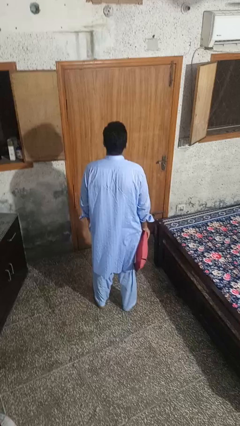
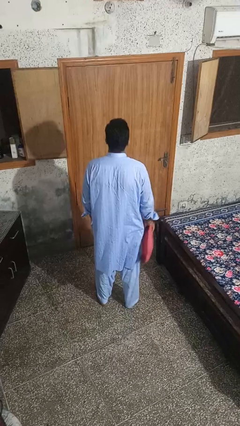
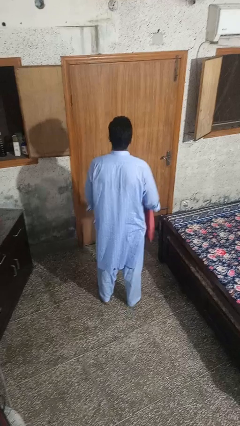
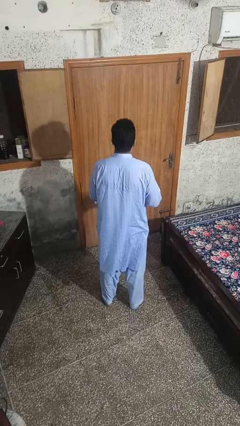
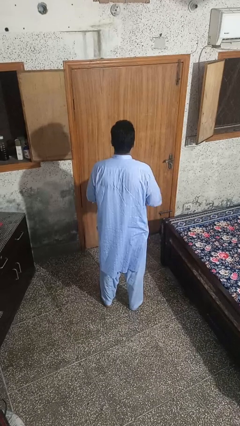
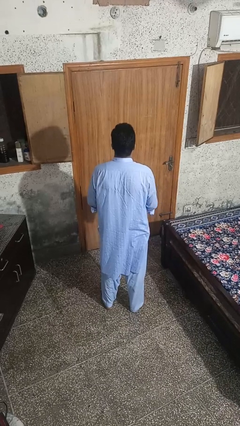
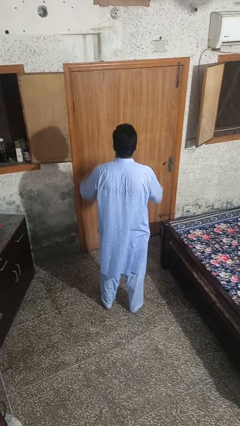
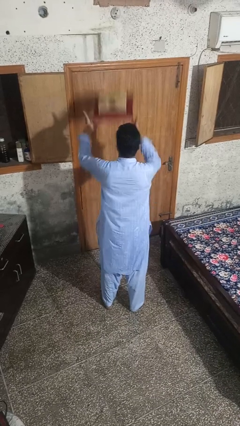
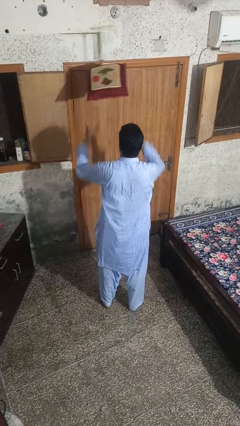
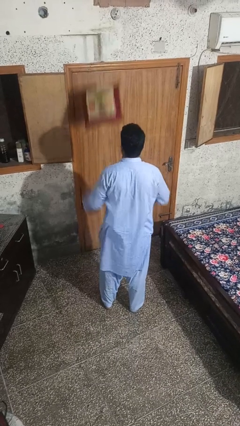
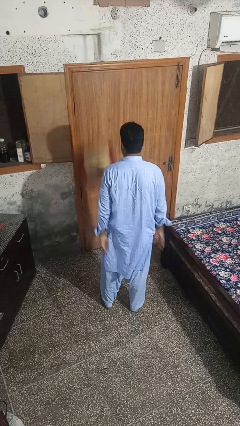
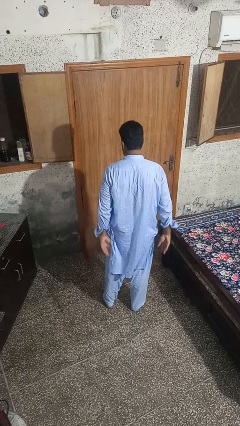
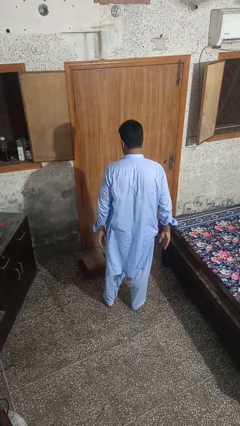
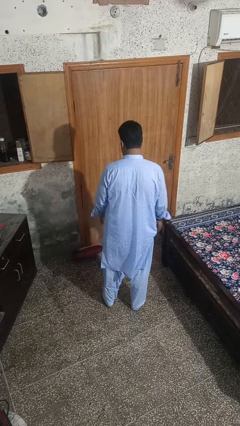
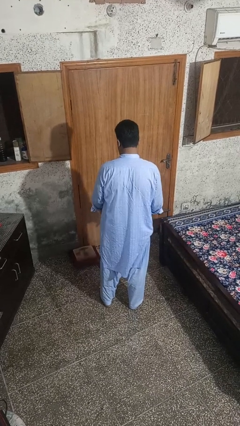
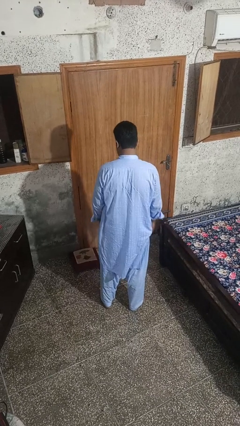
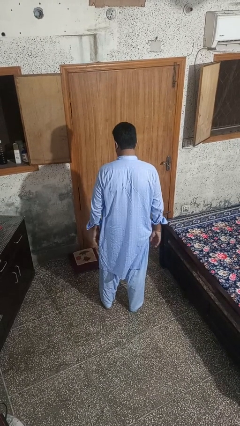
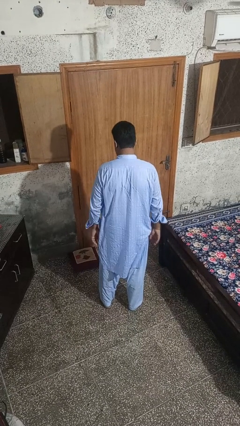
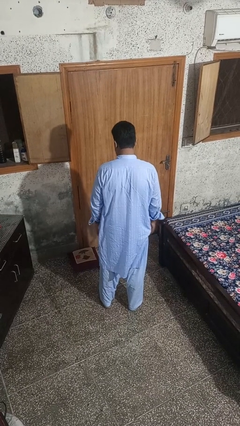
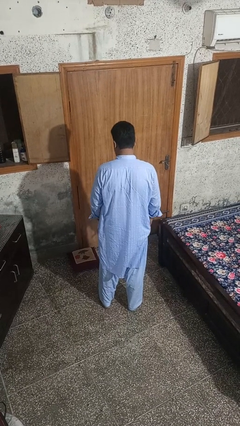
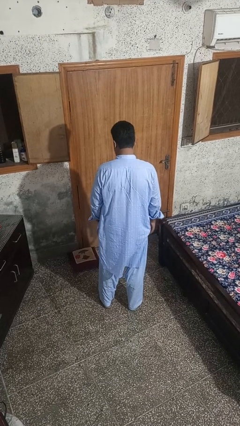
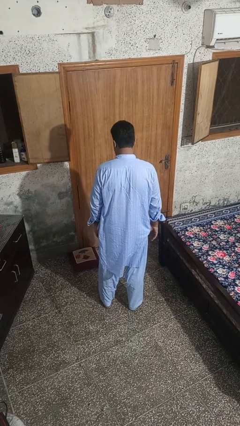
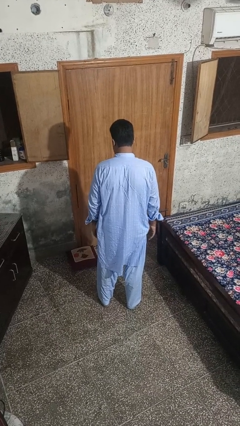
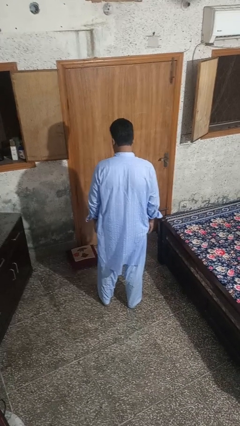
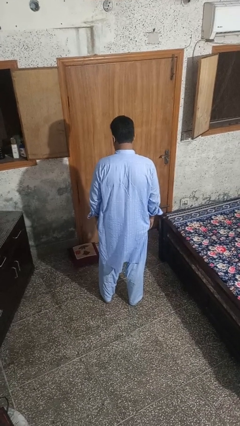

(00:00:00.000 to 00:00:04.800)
person throws object into air

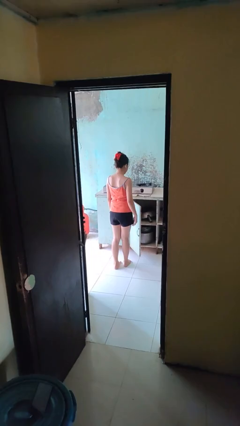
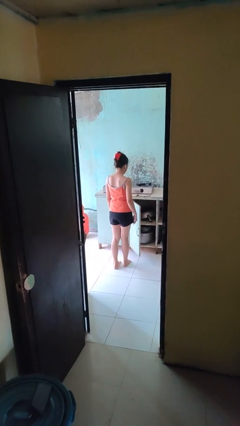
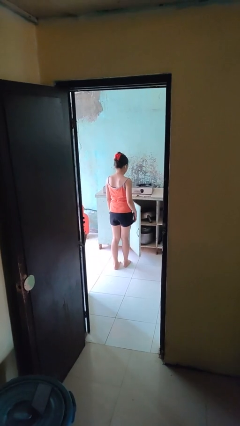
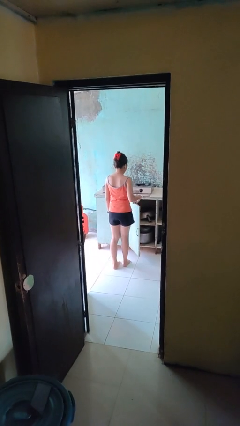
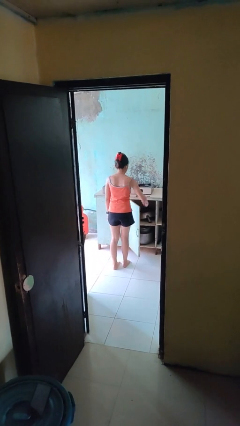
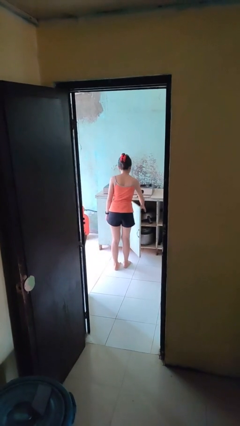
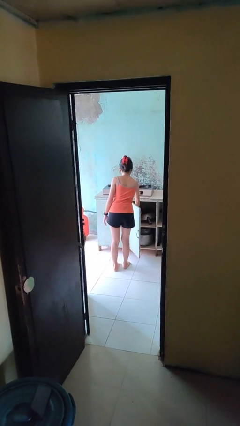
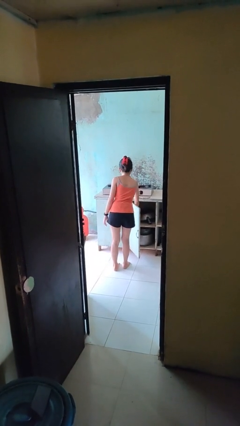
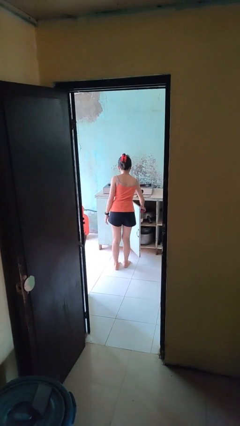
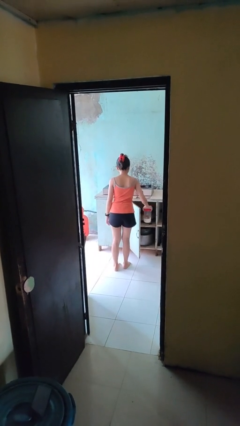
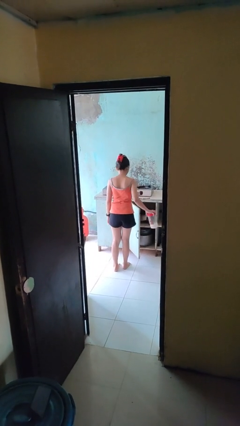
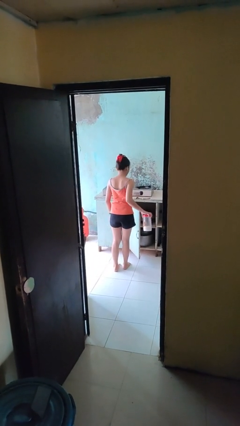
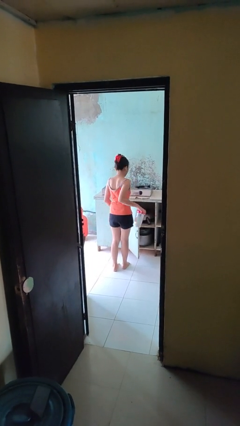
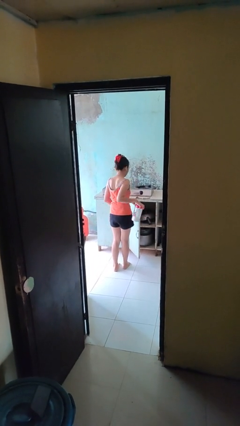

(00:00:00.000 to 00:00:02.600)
person picks up object from cabinet

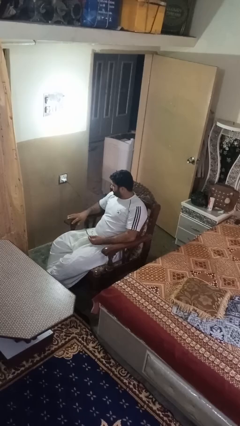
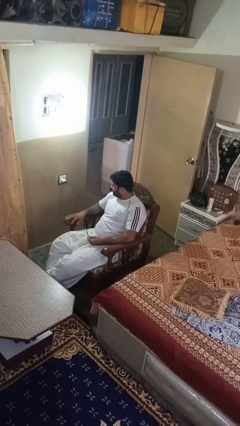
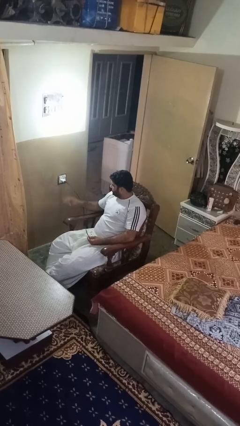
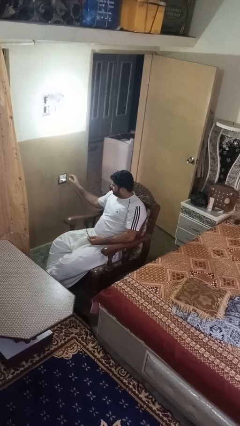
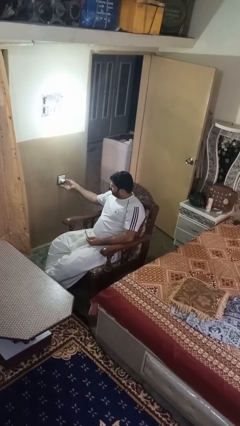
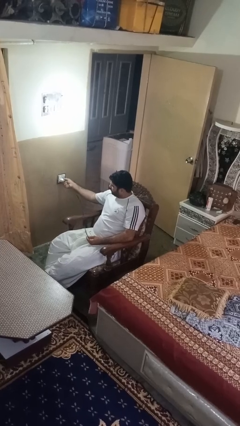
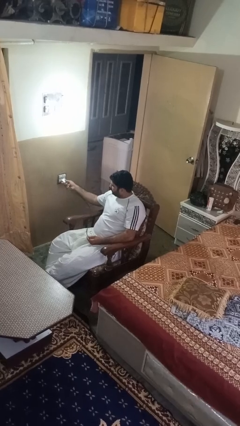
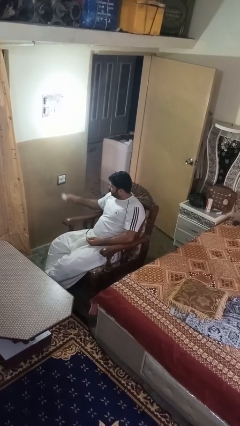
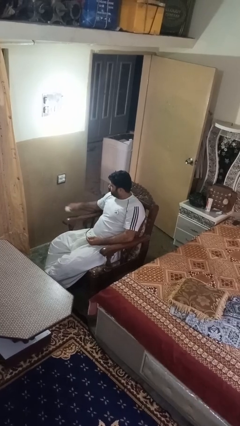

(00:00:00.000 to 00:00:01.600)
person unplugs from electrical socket

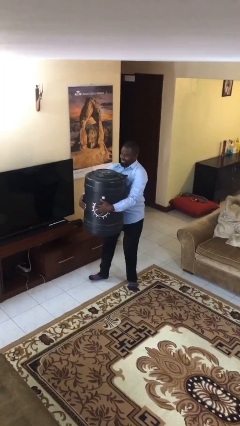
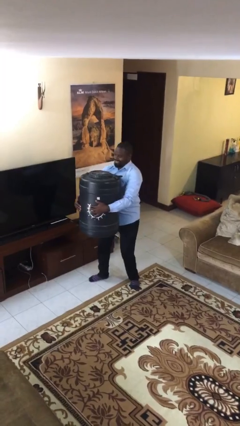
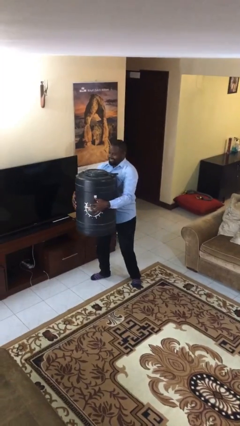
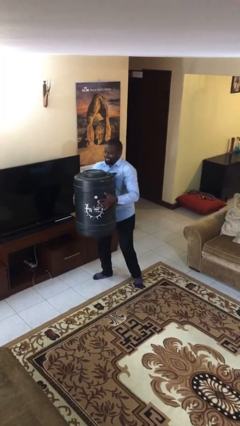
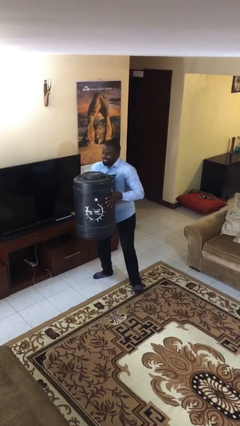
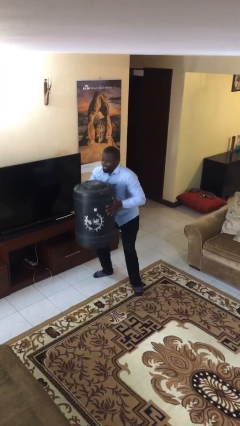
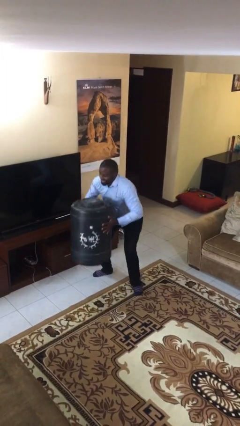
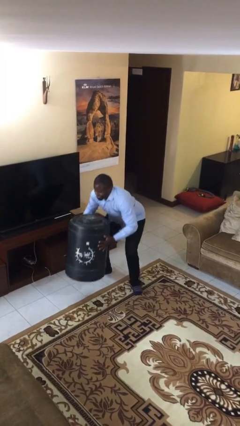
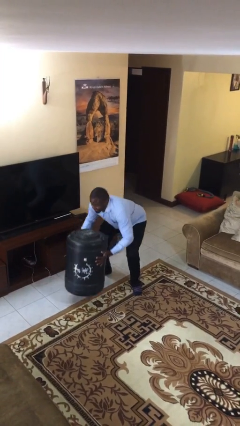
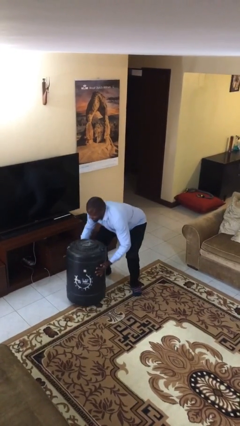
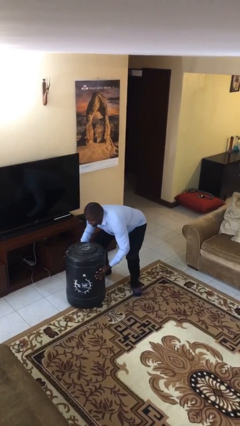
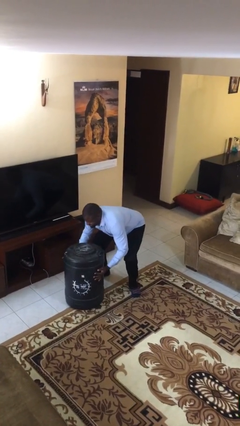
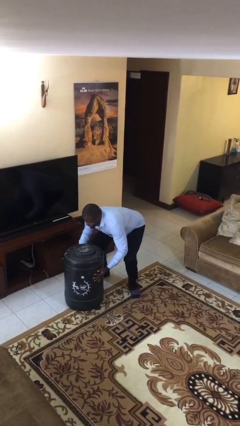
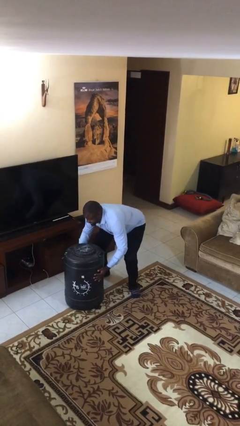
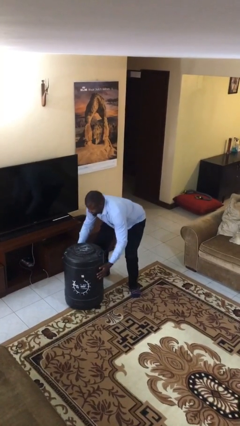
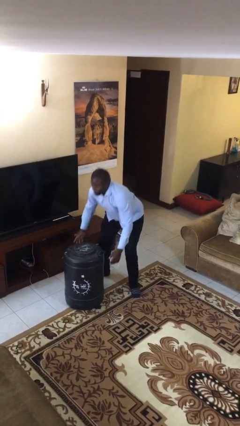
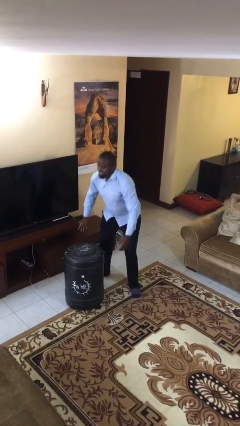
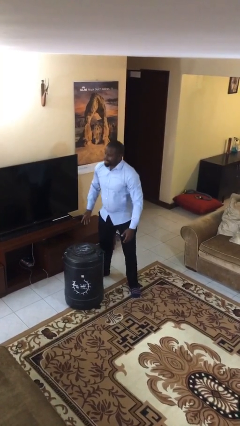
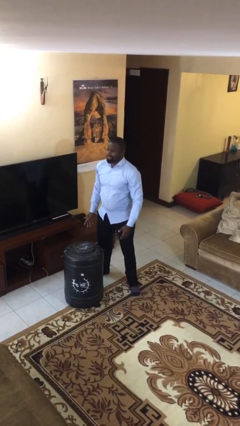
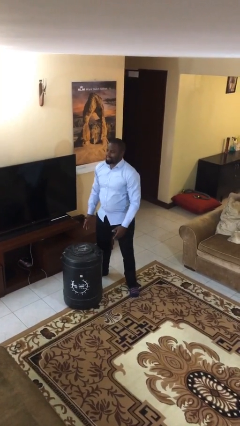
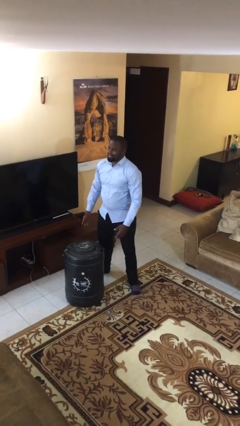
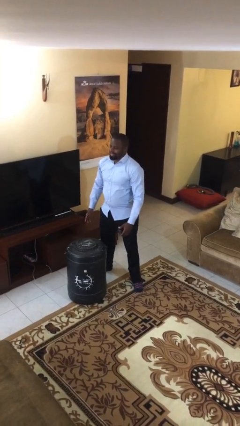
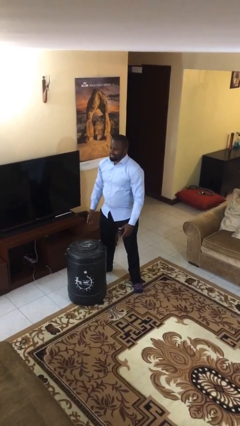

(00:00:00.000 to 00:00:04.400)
person puts down object on floor

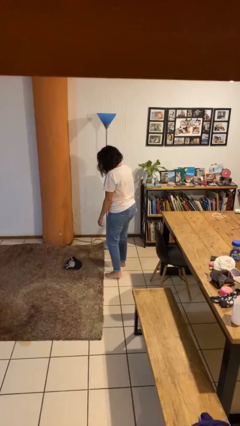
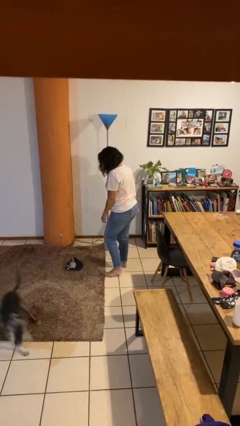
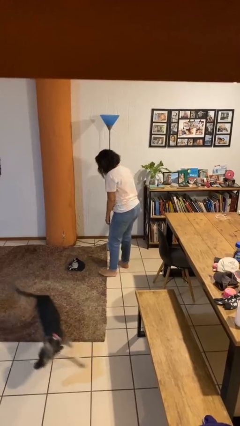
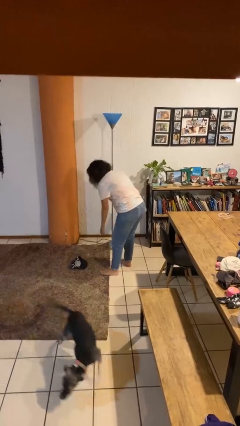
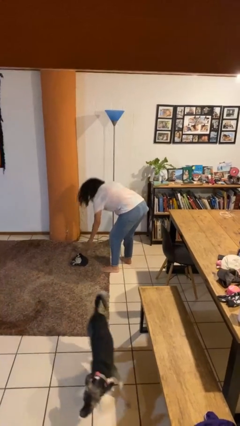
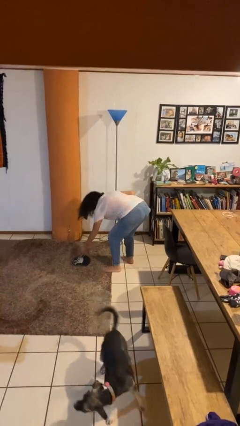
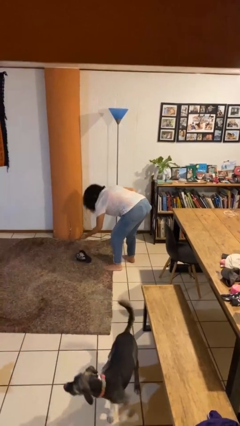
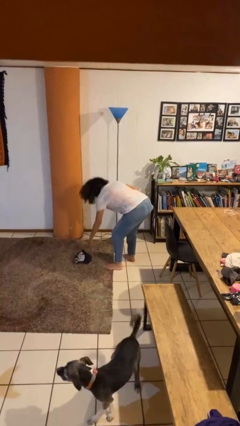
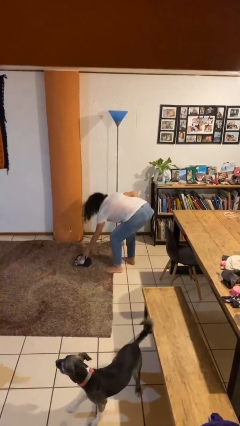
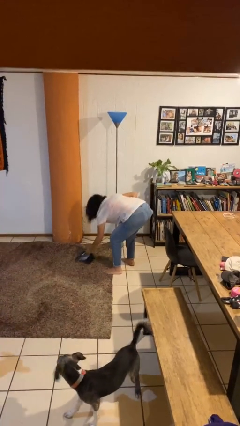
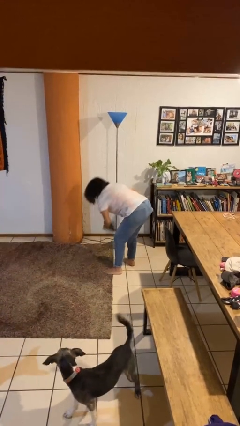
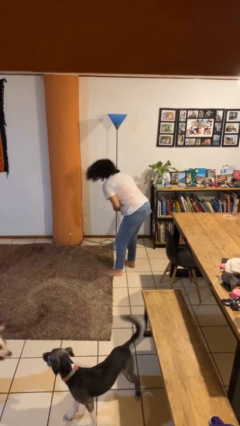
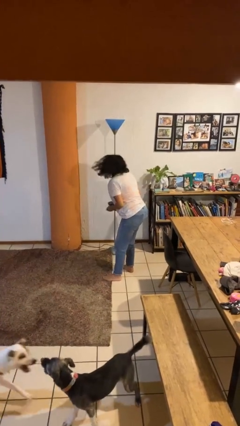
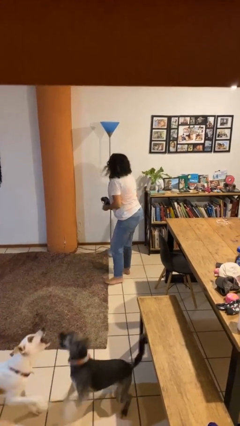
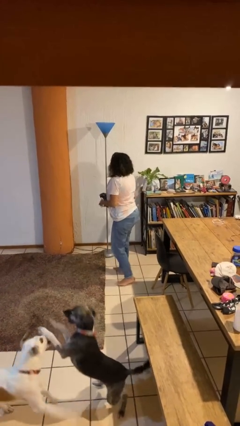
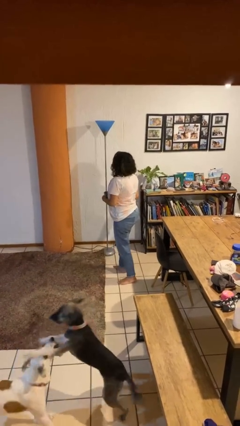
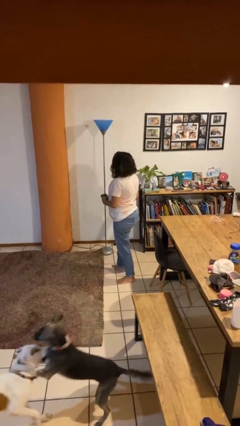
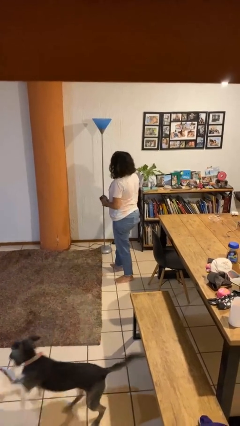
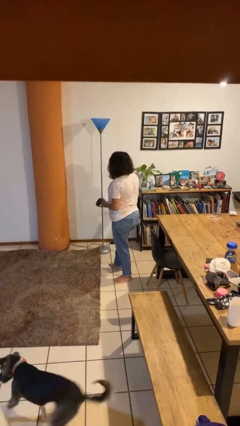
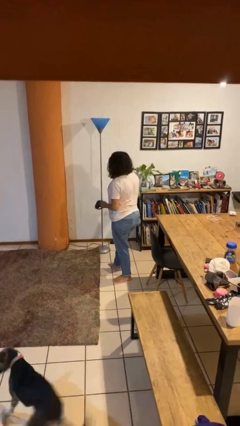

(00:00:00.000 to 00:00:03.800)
person picks up object from floor
